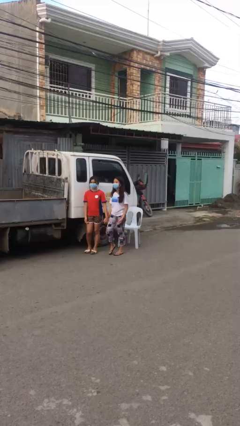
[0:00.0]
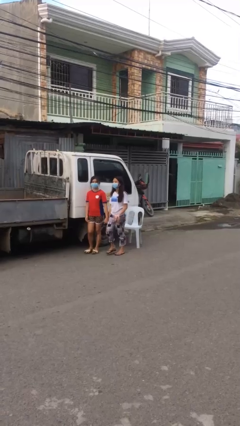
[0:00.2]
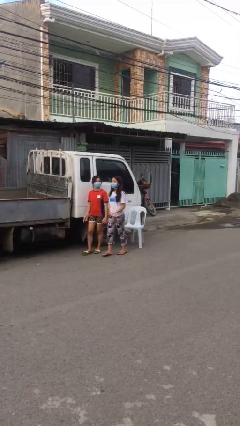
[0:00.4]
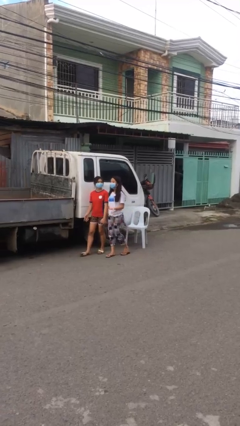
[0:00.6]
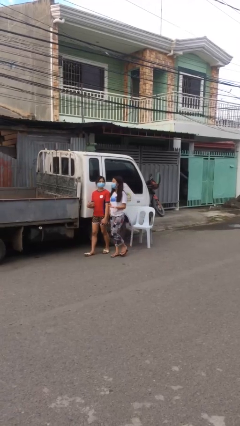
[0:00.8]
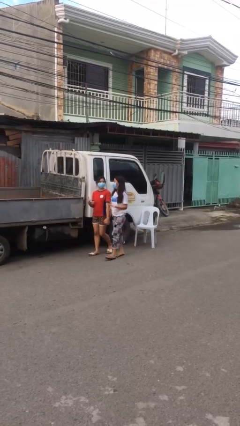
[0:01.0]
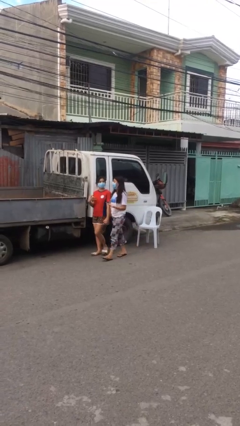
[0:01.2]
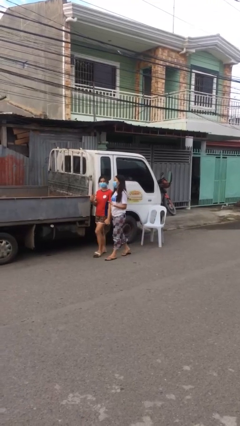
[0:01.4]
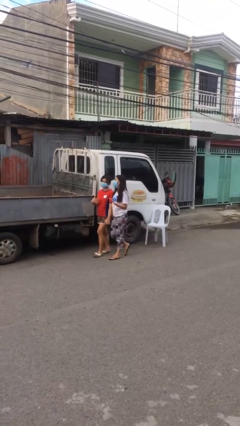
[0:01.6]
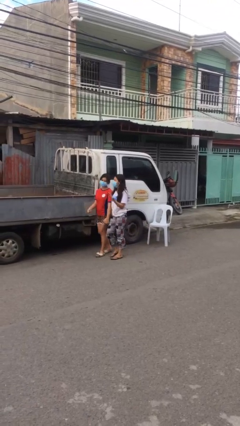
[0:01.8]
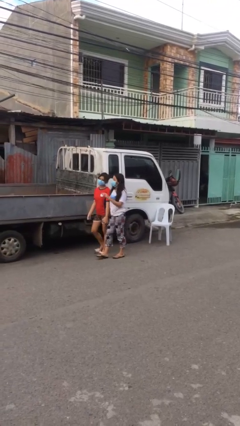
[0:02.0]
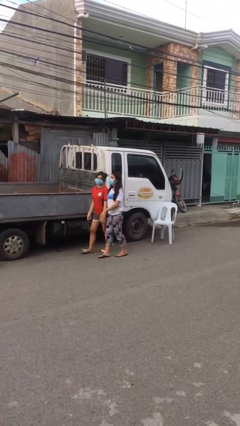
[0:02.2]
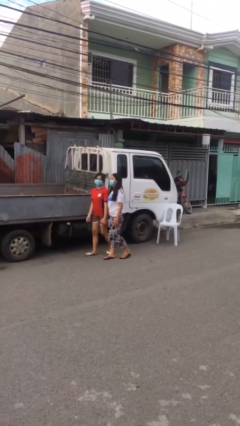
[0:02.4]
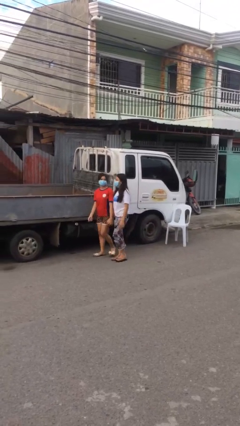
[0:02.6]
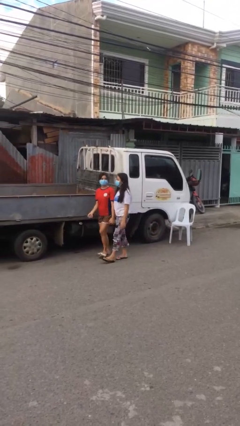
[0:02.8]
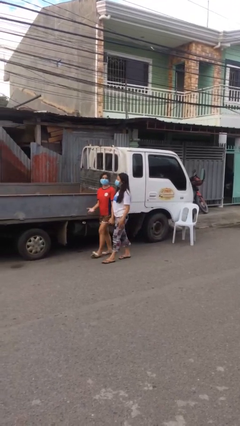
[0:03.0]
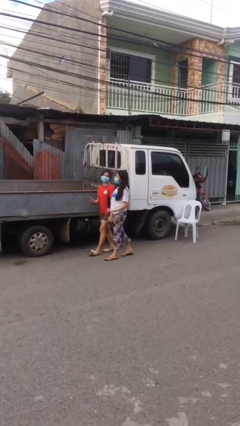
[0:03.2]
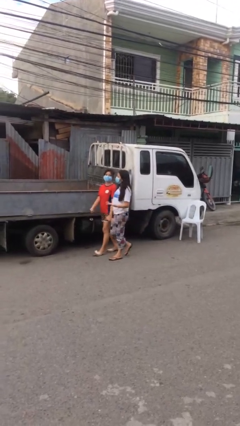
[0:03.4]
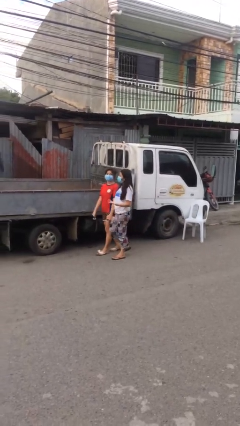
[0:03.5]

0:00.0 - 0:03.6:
person holds hand

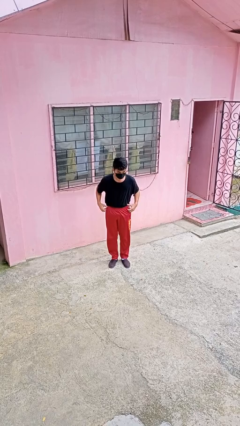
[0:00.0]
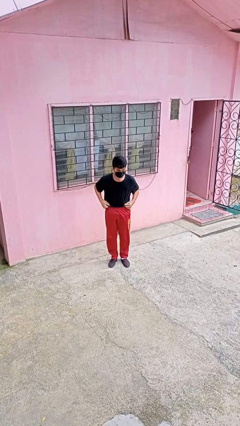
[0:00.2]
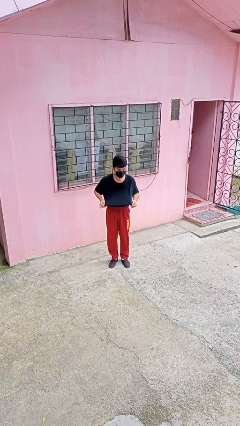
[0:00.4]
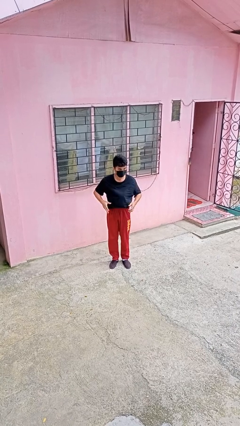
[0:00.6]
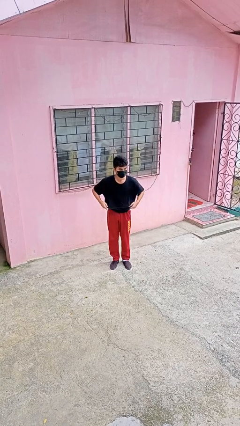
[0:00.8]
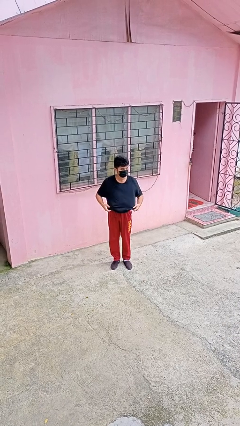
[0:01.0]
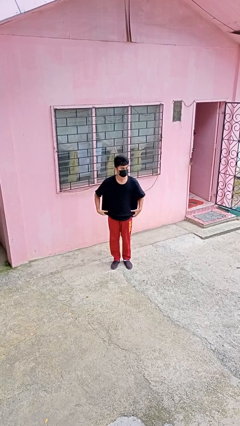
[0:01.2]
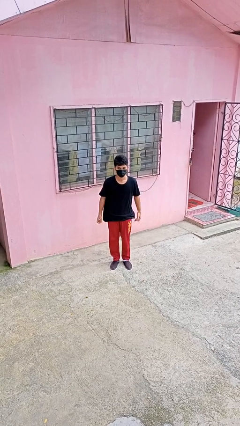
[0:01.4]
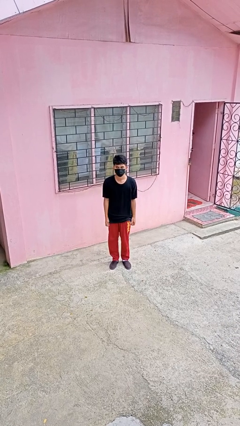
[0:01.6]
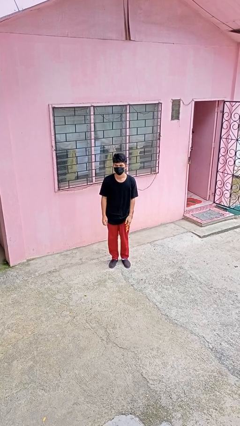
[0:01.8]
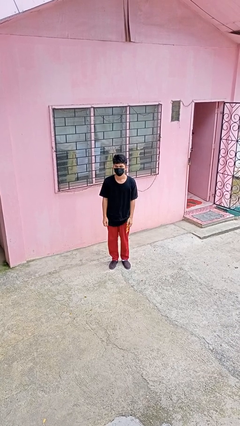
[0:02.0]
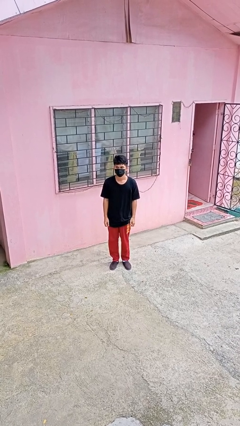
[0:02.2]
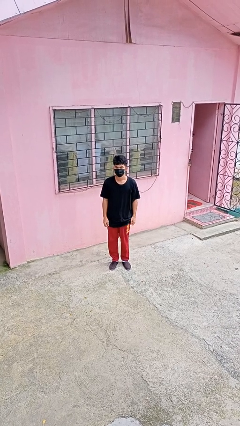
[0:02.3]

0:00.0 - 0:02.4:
person untucks shirt

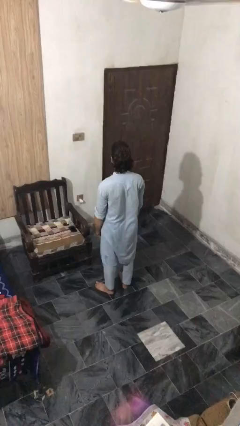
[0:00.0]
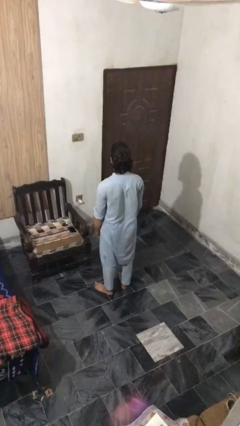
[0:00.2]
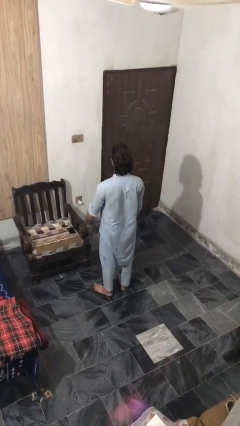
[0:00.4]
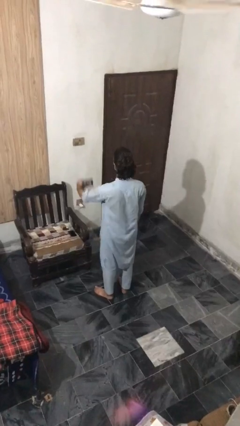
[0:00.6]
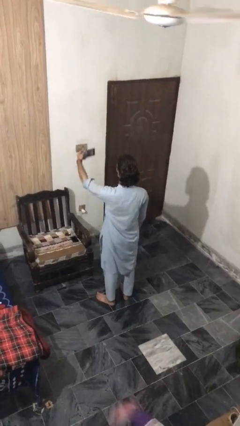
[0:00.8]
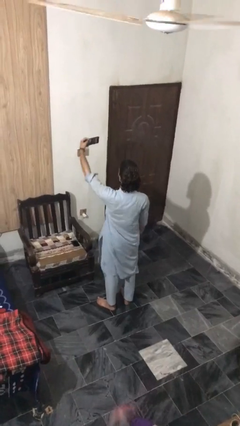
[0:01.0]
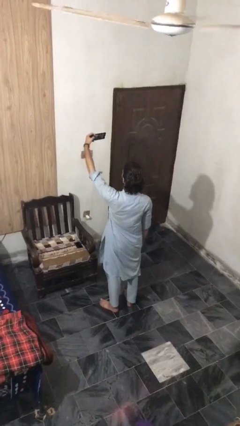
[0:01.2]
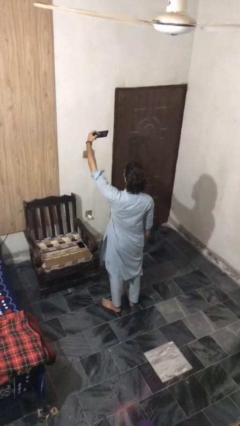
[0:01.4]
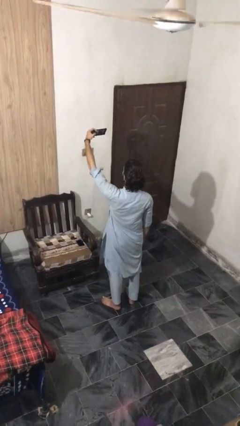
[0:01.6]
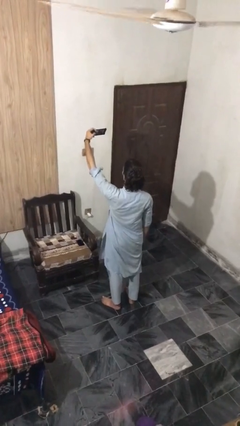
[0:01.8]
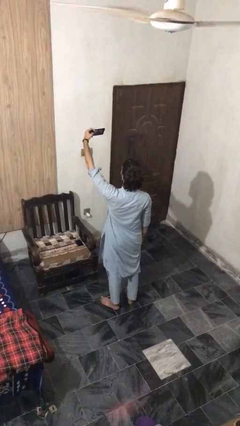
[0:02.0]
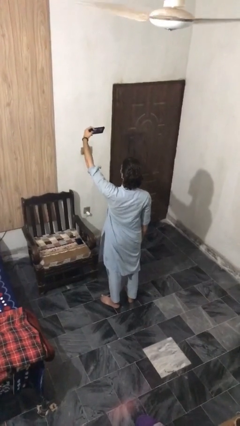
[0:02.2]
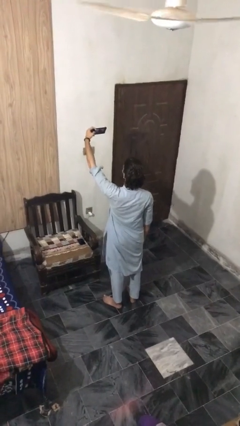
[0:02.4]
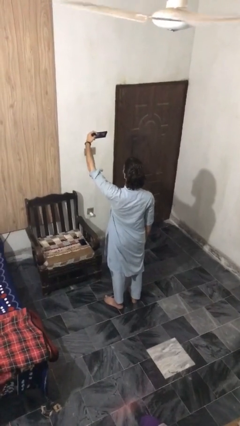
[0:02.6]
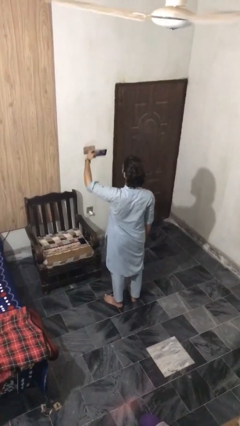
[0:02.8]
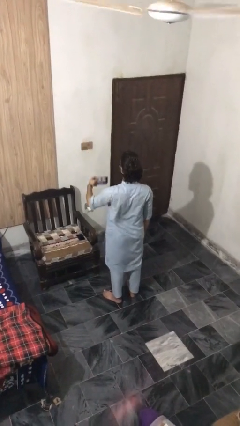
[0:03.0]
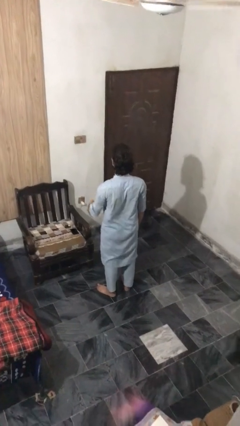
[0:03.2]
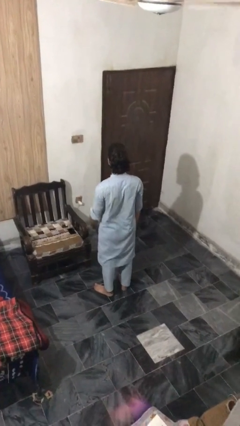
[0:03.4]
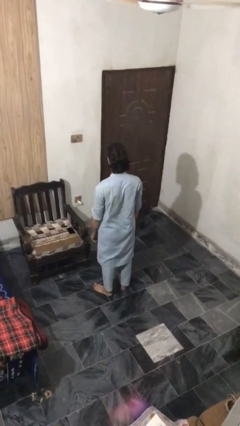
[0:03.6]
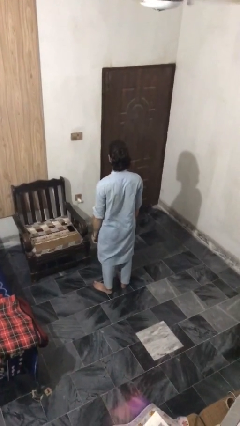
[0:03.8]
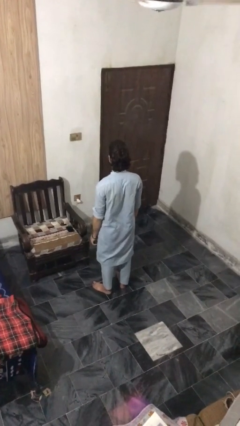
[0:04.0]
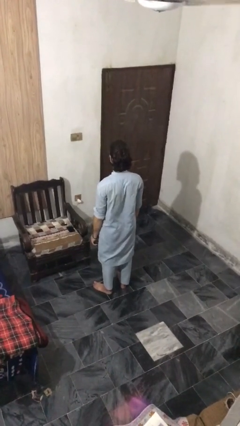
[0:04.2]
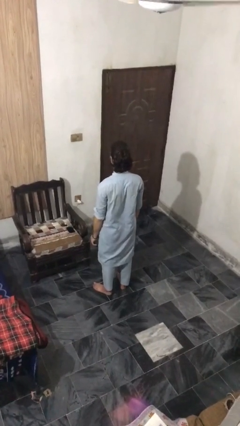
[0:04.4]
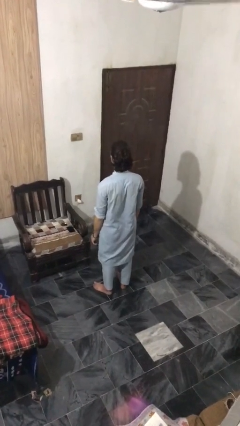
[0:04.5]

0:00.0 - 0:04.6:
person takes selfie

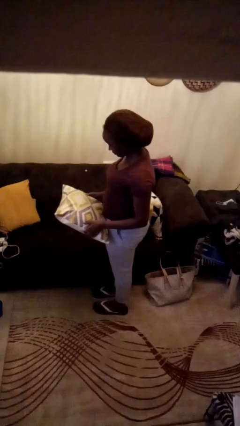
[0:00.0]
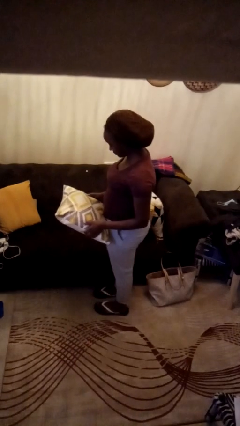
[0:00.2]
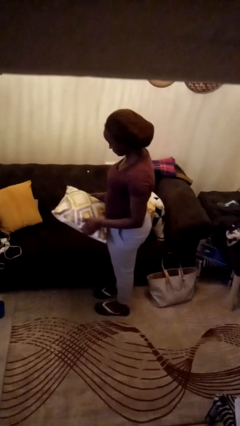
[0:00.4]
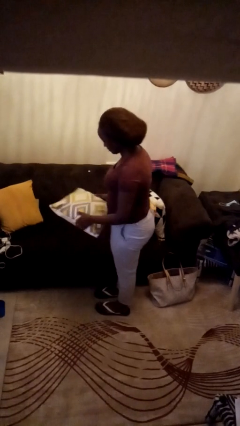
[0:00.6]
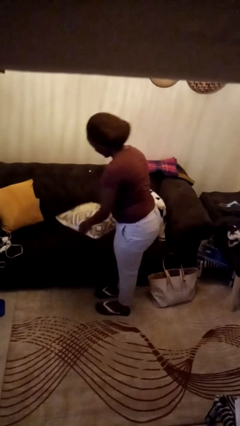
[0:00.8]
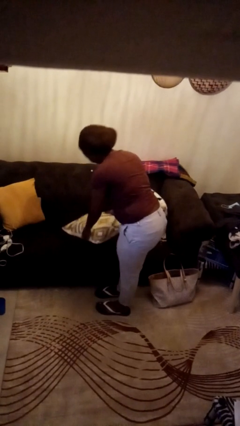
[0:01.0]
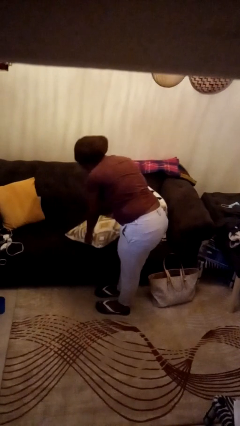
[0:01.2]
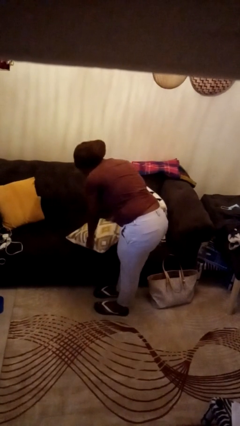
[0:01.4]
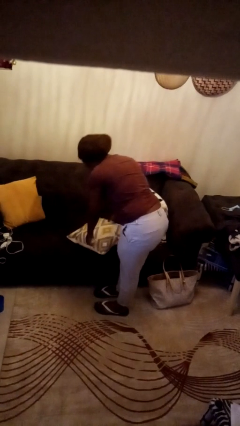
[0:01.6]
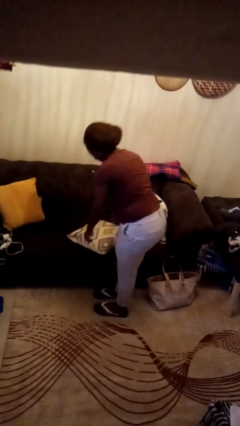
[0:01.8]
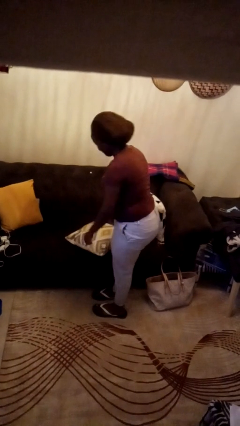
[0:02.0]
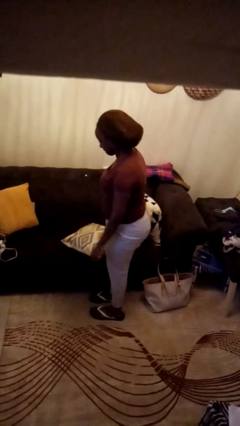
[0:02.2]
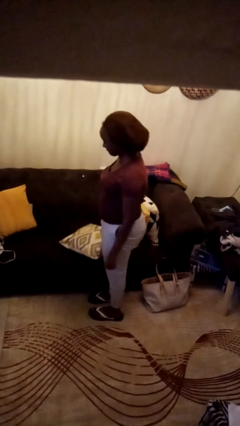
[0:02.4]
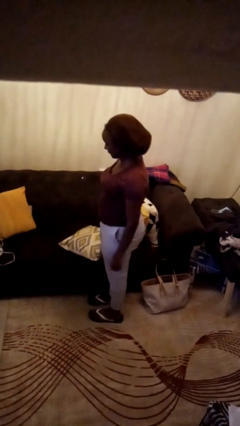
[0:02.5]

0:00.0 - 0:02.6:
person puts down object on couch

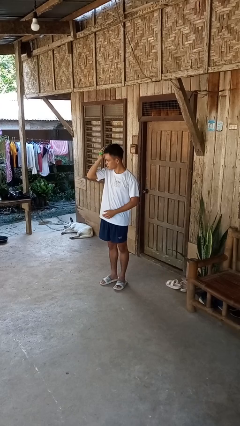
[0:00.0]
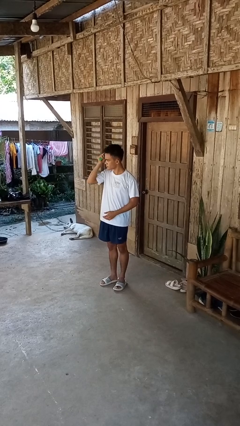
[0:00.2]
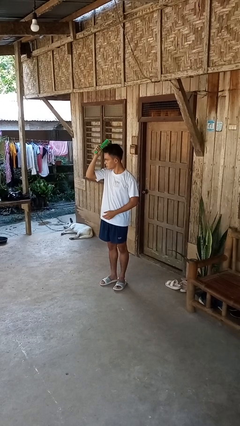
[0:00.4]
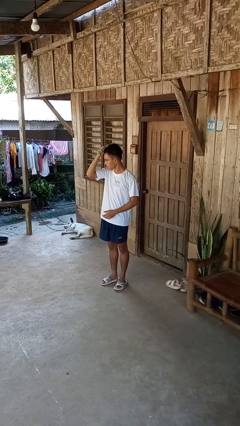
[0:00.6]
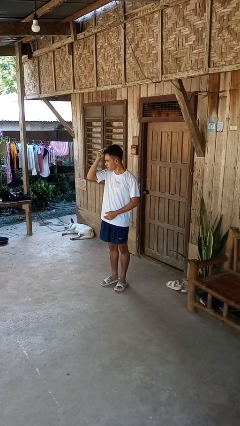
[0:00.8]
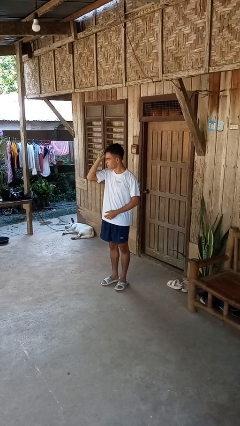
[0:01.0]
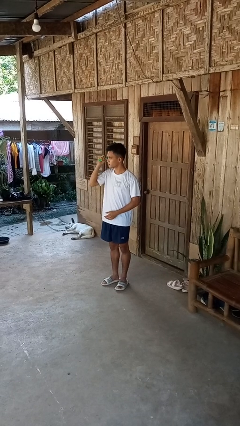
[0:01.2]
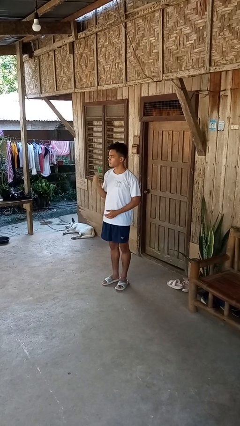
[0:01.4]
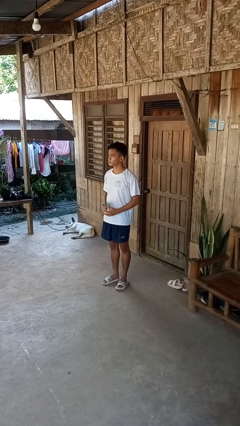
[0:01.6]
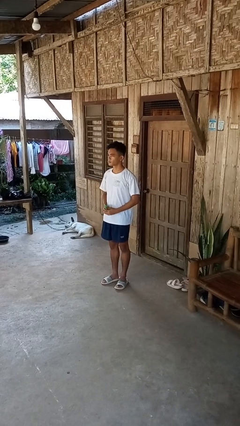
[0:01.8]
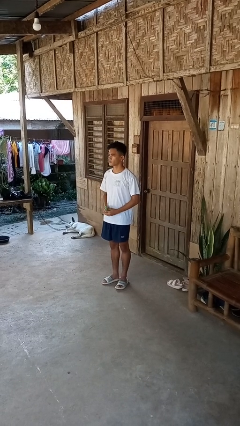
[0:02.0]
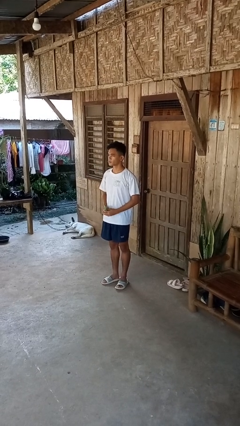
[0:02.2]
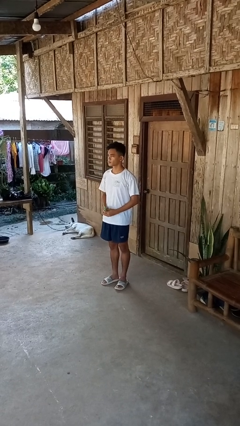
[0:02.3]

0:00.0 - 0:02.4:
person brushes hair

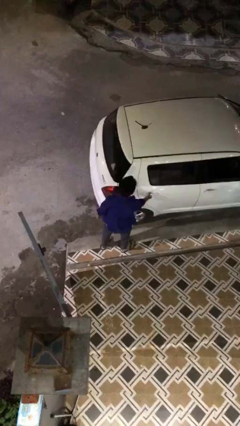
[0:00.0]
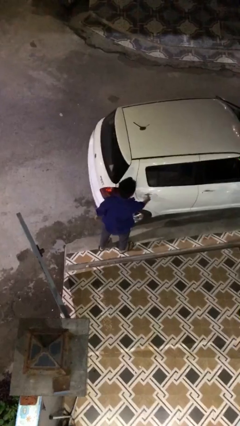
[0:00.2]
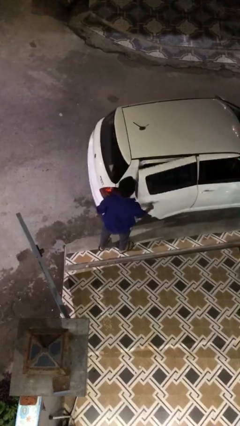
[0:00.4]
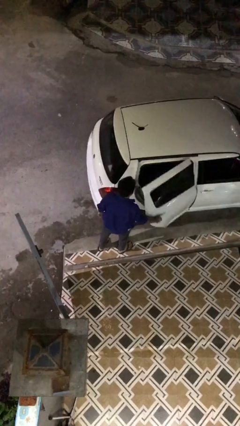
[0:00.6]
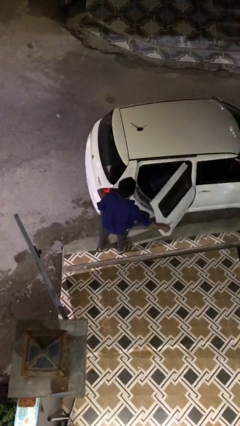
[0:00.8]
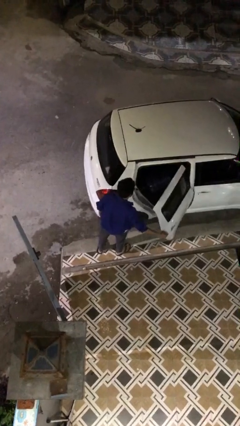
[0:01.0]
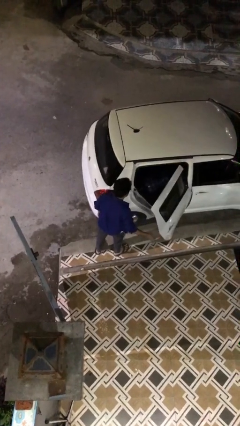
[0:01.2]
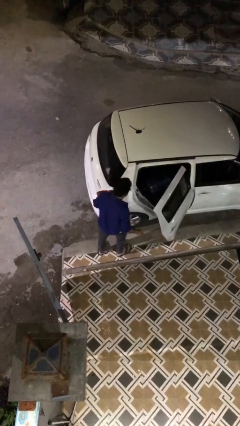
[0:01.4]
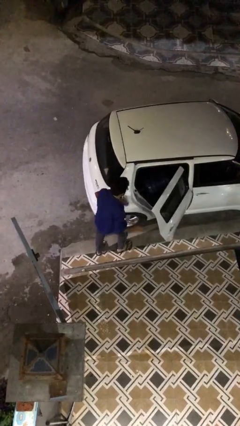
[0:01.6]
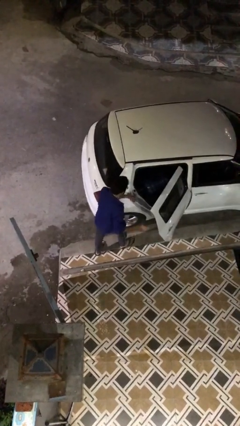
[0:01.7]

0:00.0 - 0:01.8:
person opens car door
